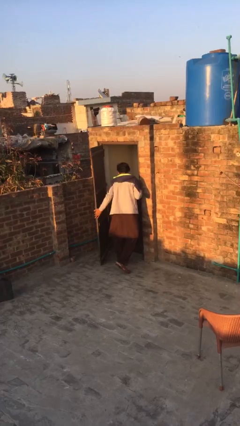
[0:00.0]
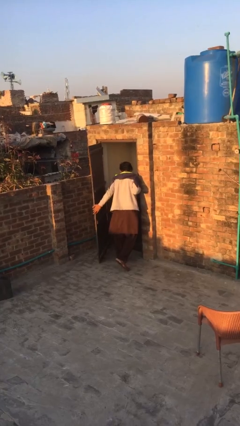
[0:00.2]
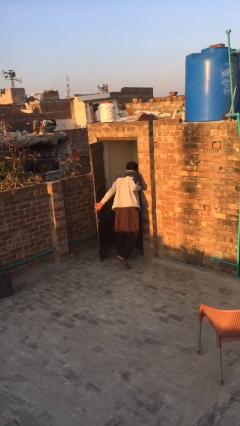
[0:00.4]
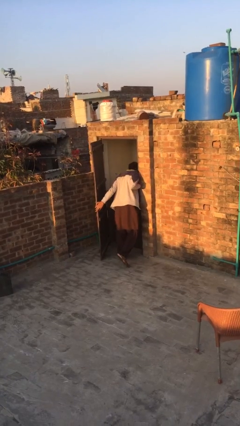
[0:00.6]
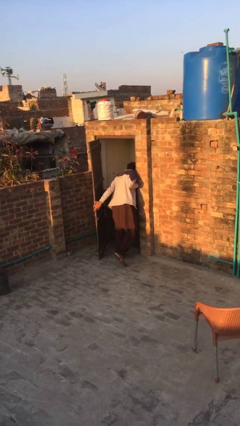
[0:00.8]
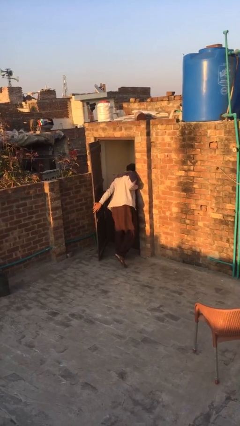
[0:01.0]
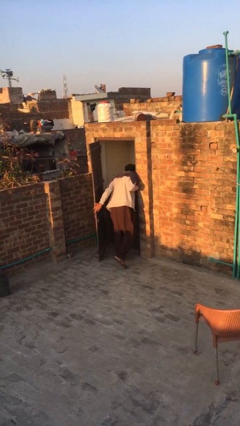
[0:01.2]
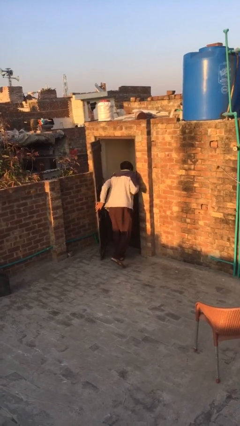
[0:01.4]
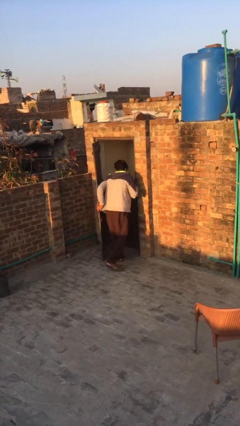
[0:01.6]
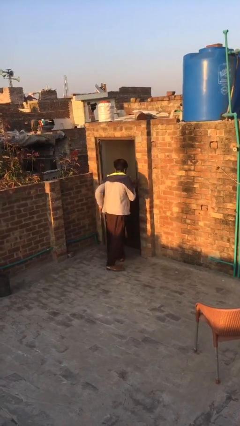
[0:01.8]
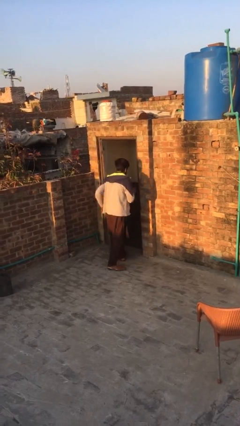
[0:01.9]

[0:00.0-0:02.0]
person opens facility door

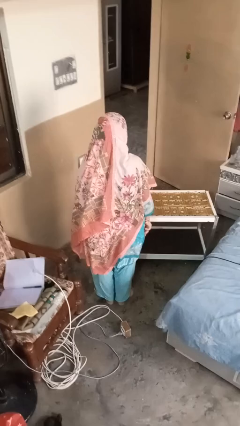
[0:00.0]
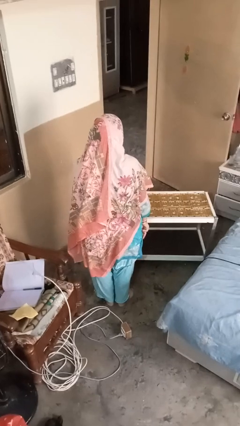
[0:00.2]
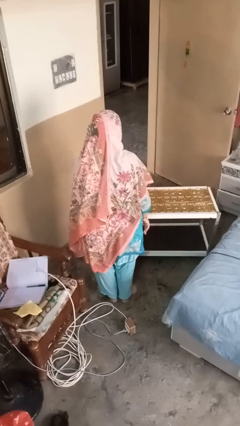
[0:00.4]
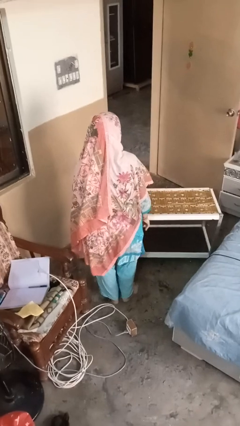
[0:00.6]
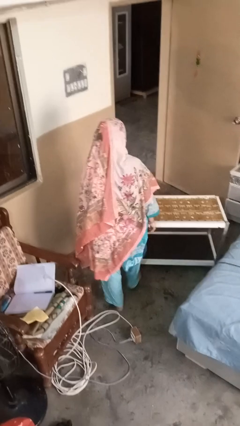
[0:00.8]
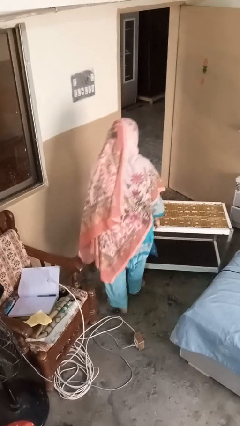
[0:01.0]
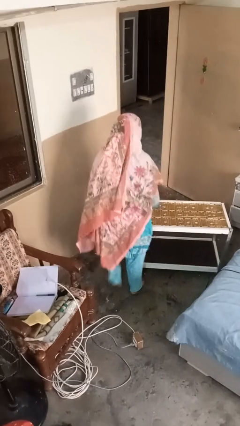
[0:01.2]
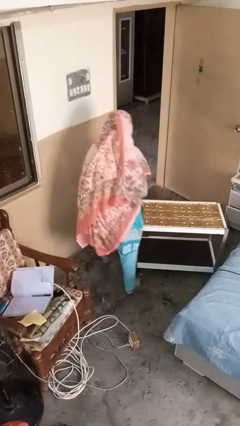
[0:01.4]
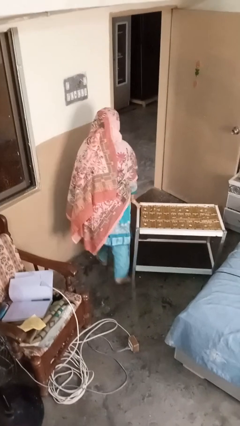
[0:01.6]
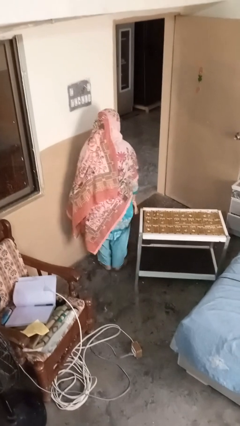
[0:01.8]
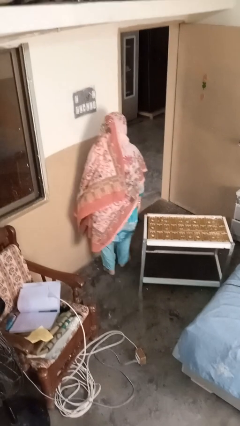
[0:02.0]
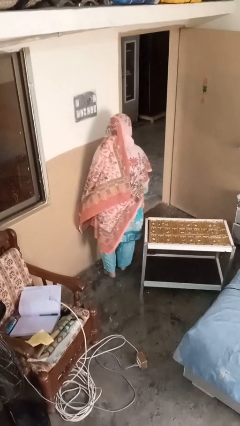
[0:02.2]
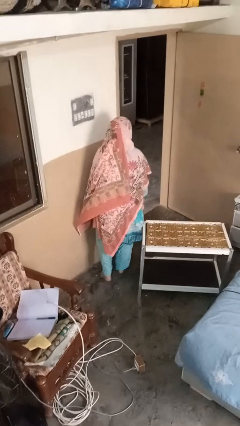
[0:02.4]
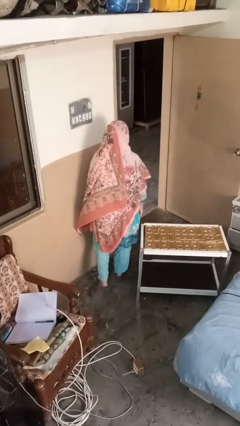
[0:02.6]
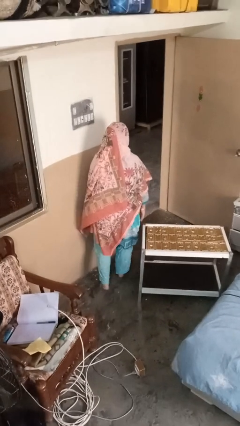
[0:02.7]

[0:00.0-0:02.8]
person bumps into table

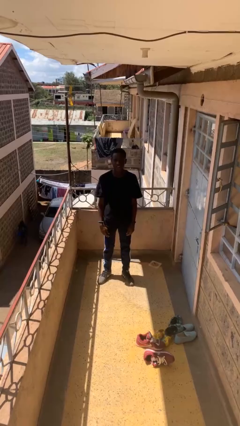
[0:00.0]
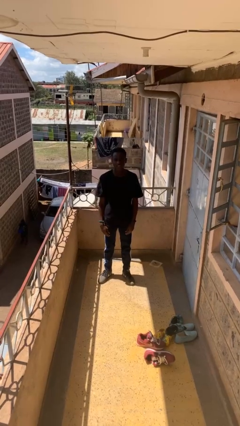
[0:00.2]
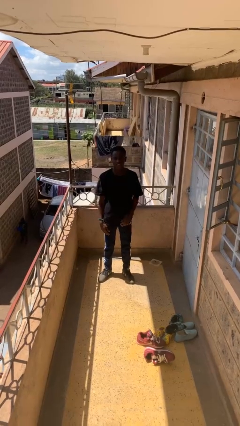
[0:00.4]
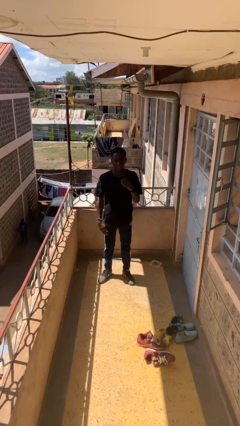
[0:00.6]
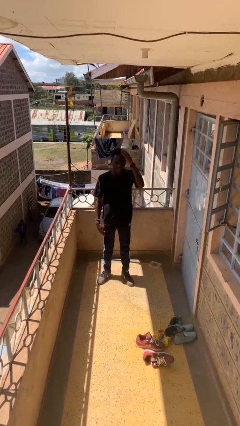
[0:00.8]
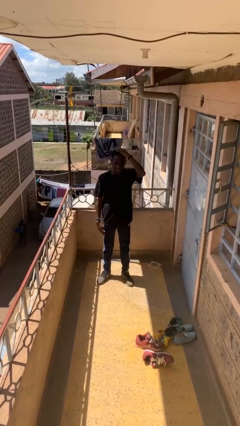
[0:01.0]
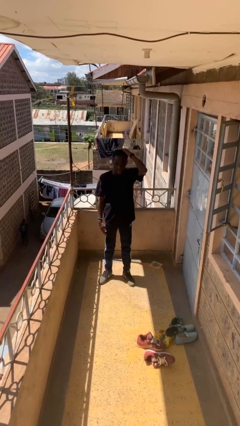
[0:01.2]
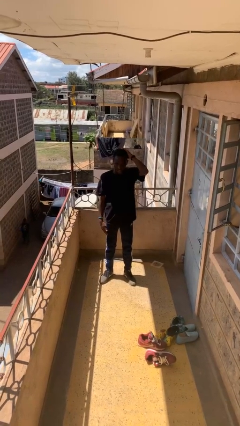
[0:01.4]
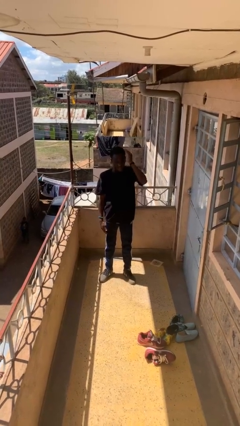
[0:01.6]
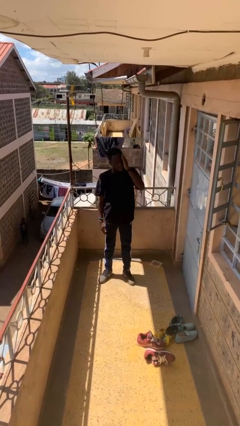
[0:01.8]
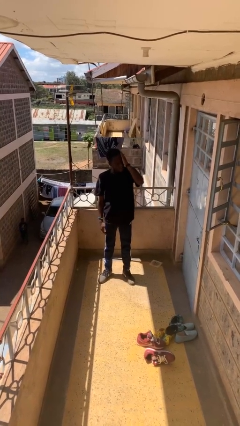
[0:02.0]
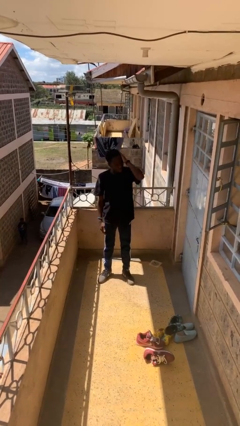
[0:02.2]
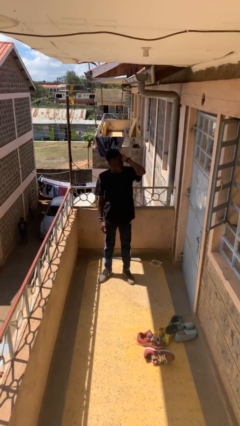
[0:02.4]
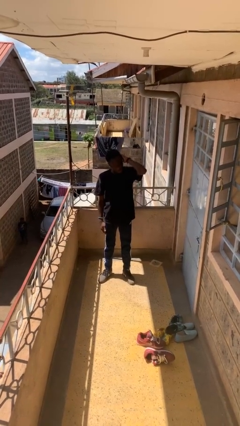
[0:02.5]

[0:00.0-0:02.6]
person strokes hair

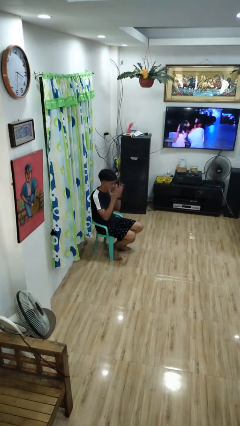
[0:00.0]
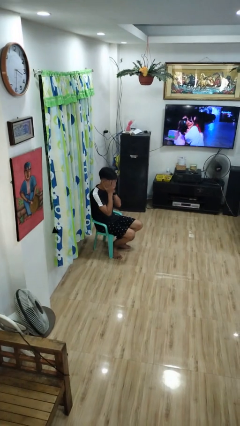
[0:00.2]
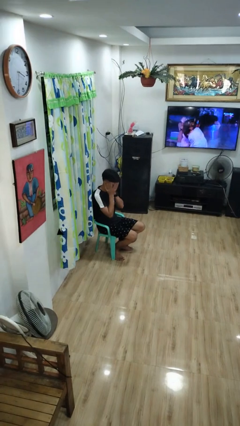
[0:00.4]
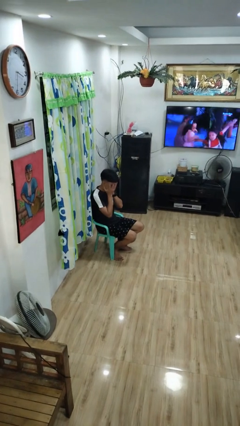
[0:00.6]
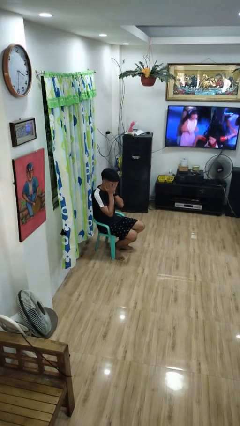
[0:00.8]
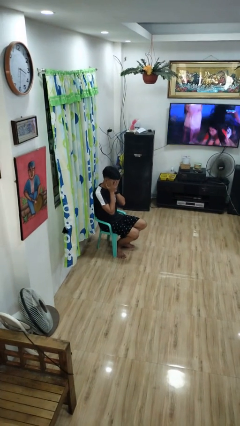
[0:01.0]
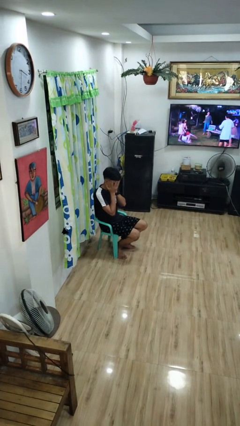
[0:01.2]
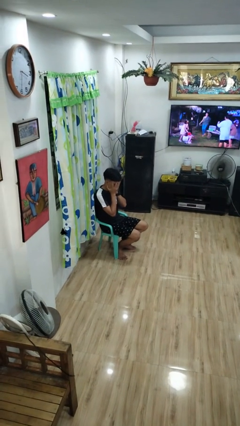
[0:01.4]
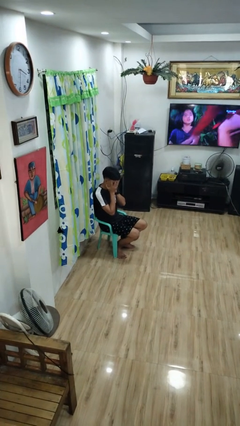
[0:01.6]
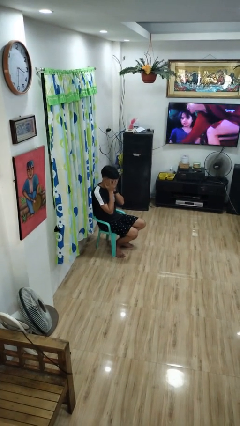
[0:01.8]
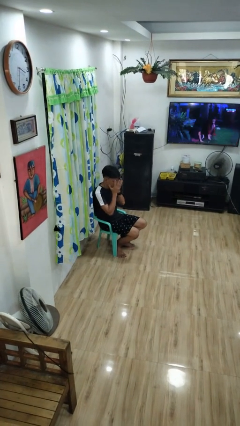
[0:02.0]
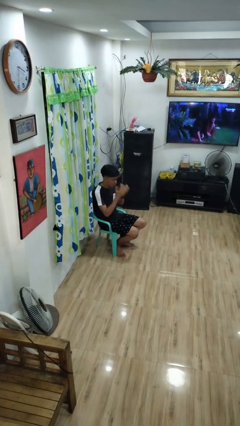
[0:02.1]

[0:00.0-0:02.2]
person covers face with hands

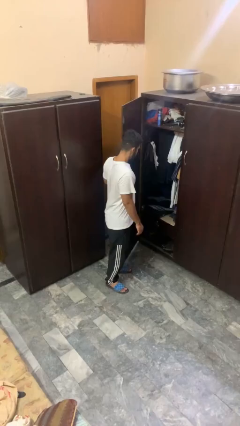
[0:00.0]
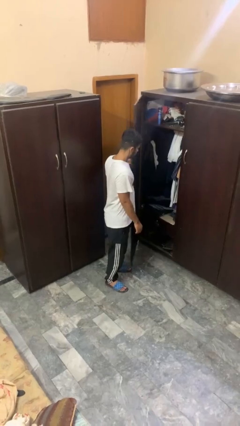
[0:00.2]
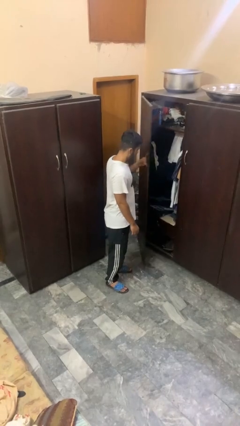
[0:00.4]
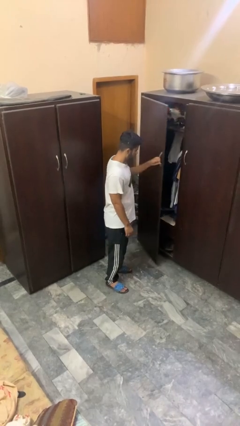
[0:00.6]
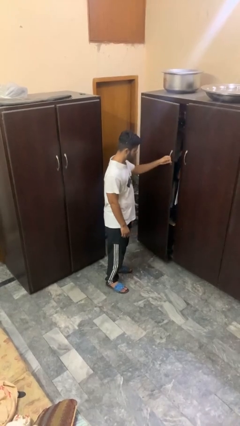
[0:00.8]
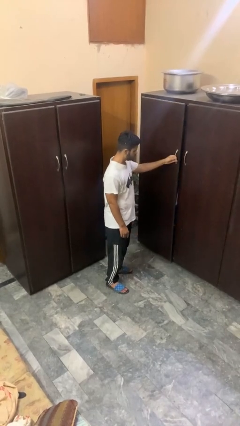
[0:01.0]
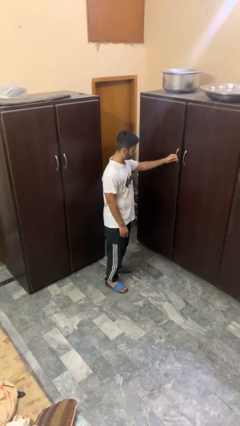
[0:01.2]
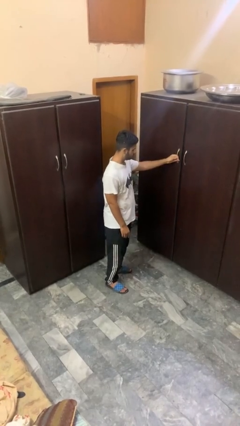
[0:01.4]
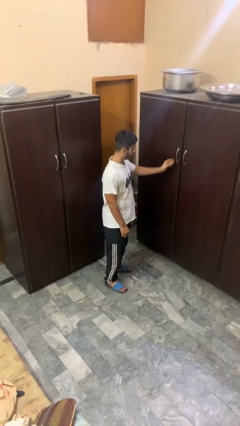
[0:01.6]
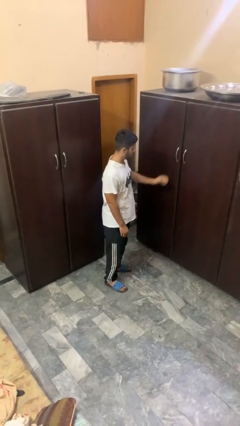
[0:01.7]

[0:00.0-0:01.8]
person closes closet door

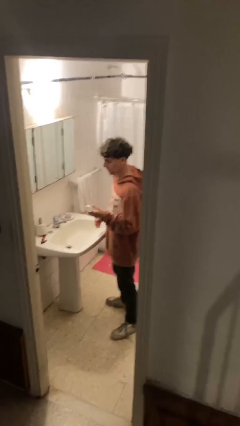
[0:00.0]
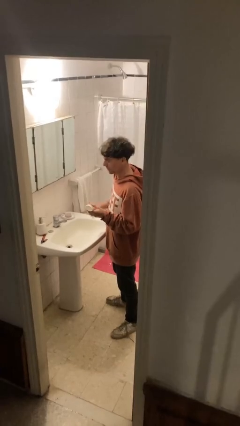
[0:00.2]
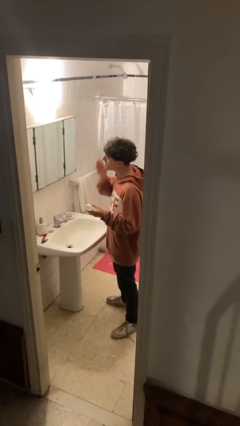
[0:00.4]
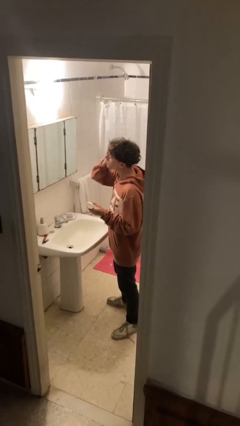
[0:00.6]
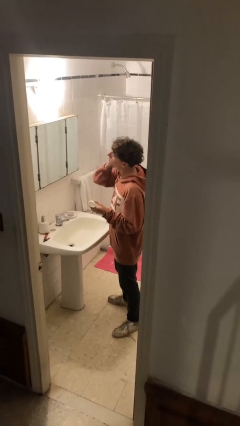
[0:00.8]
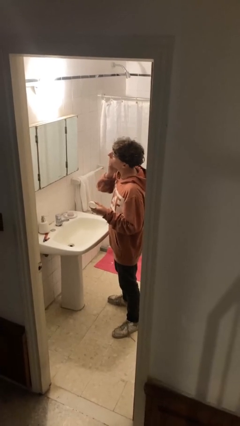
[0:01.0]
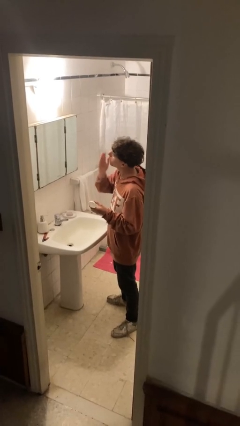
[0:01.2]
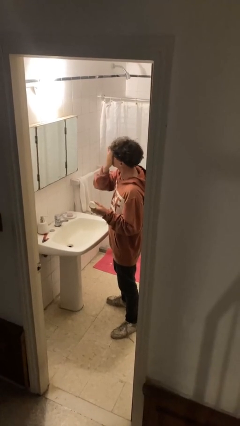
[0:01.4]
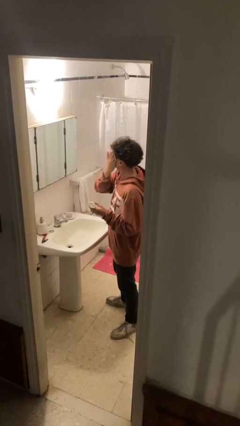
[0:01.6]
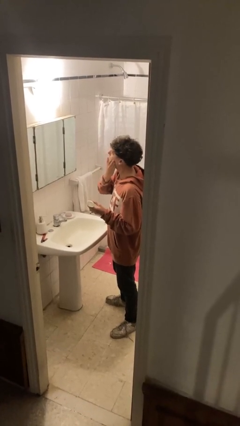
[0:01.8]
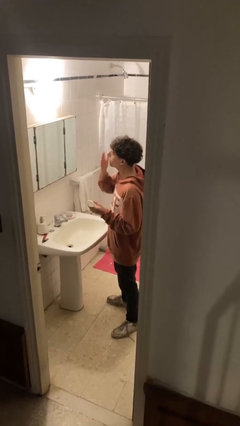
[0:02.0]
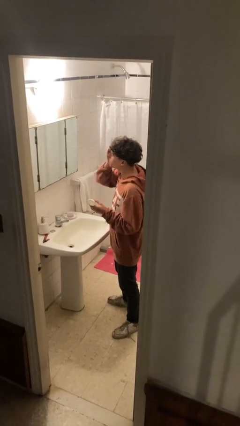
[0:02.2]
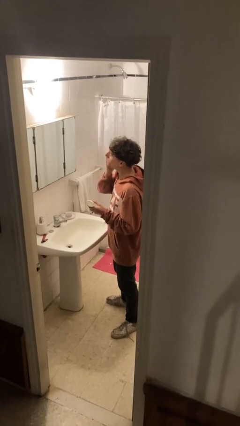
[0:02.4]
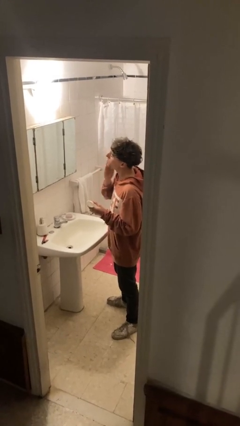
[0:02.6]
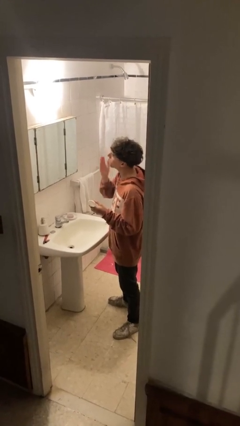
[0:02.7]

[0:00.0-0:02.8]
person applies foundation makeup

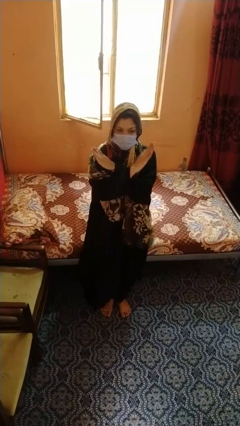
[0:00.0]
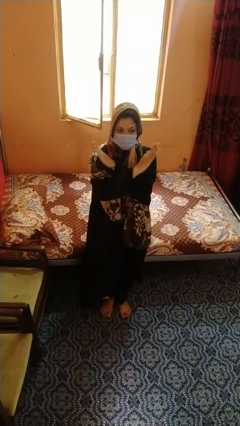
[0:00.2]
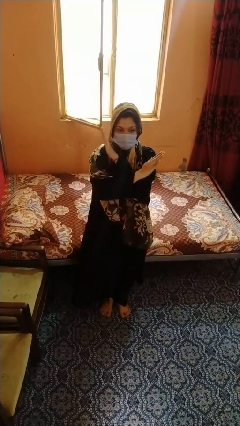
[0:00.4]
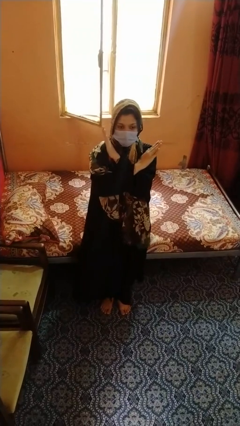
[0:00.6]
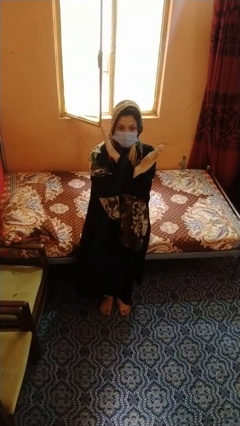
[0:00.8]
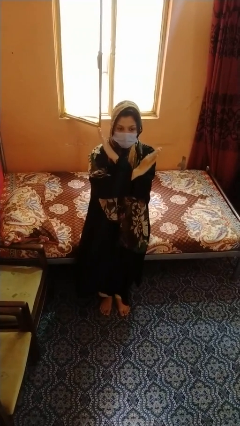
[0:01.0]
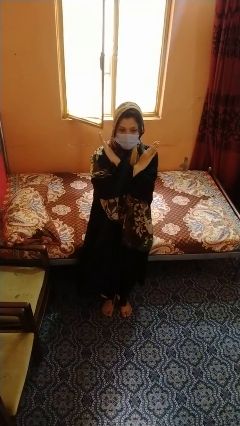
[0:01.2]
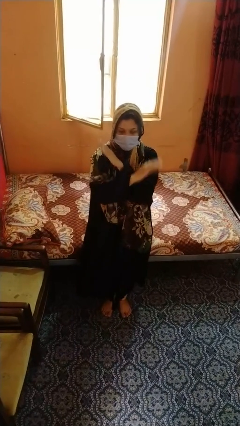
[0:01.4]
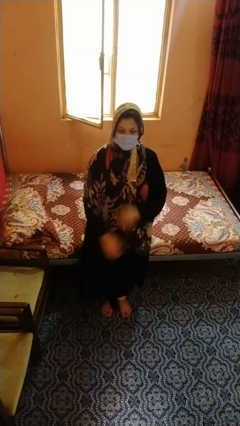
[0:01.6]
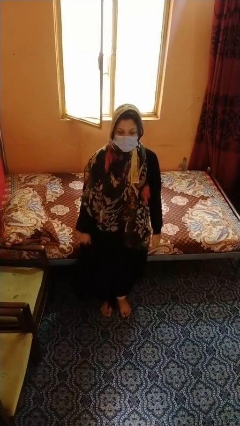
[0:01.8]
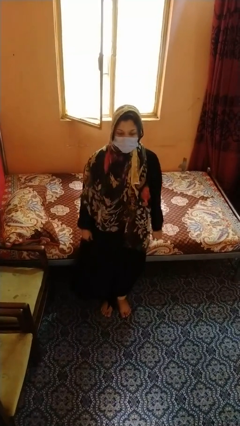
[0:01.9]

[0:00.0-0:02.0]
person gestures arms x

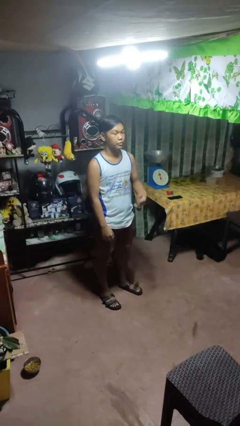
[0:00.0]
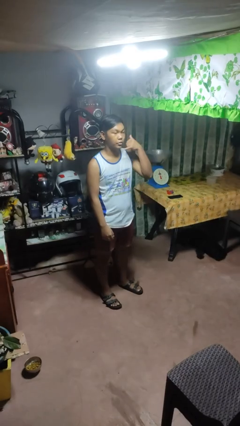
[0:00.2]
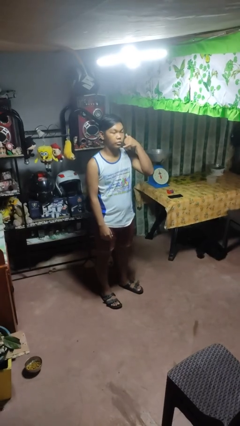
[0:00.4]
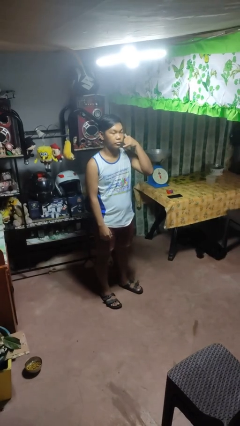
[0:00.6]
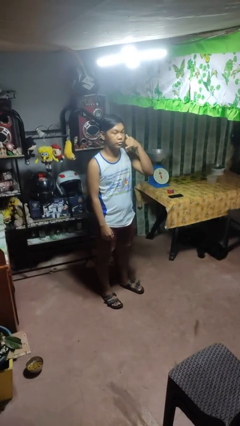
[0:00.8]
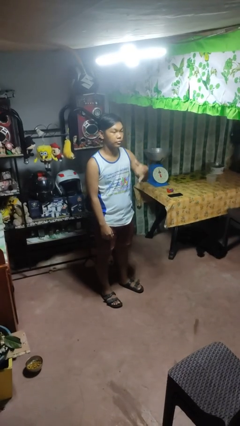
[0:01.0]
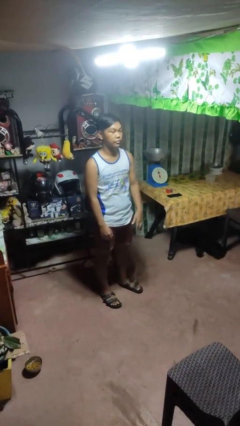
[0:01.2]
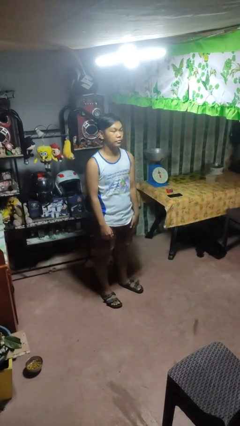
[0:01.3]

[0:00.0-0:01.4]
person gestures call me
